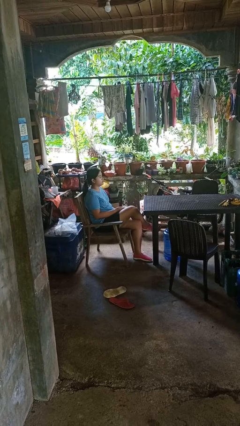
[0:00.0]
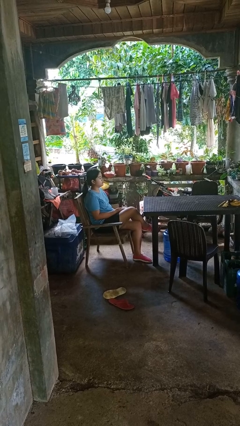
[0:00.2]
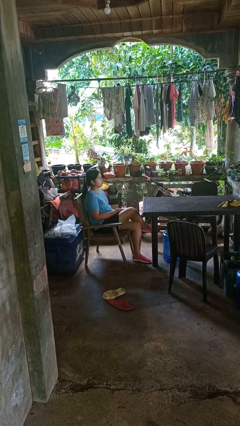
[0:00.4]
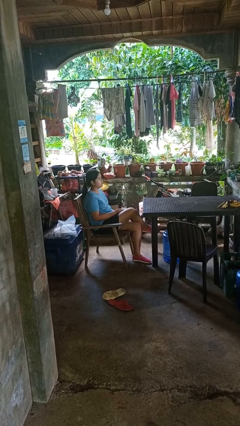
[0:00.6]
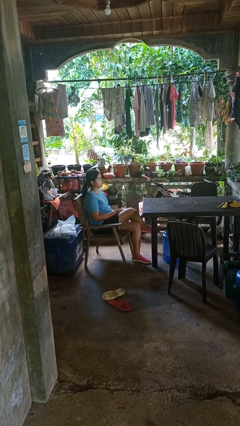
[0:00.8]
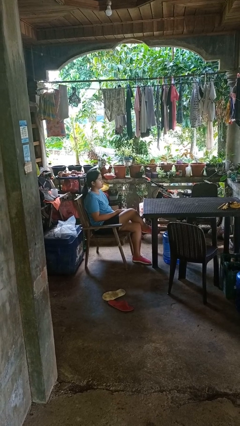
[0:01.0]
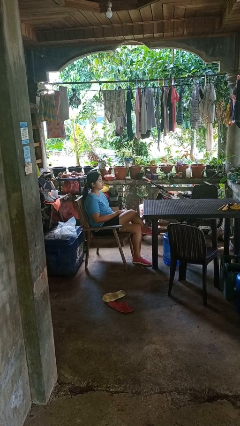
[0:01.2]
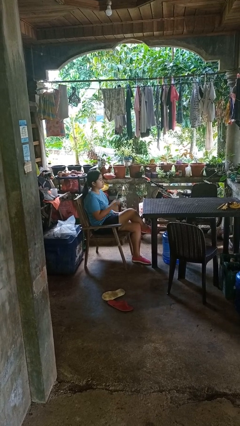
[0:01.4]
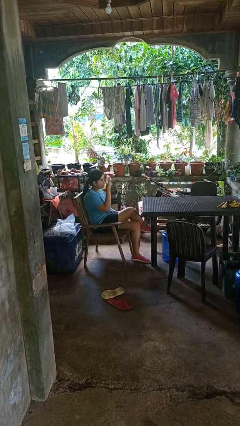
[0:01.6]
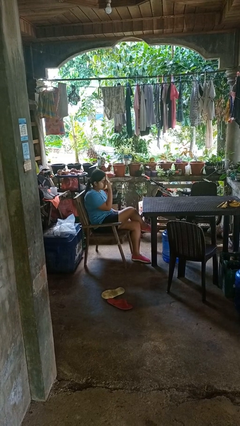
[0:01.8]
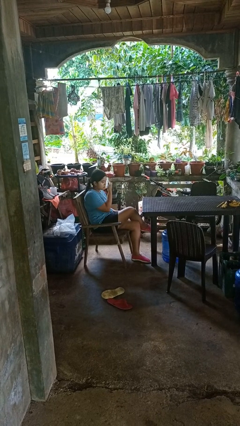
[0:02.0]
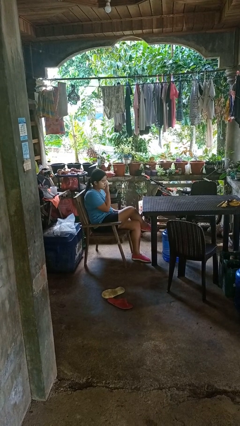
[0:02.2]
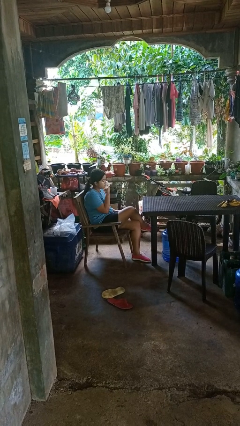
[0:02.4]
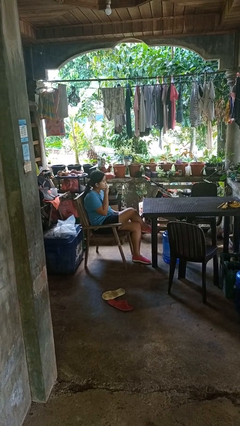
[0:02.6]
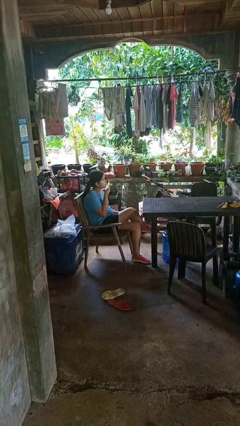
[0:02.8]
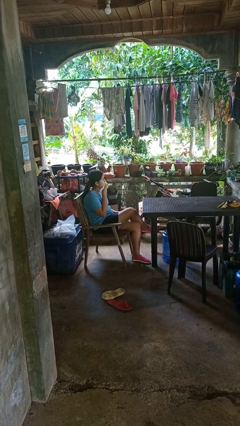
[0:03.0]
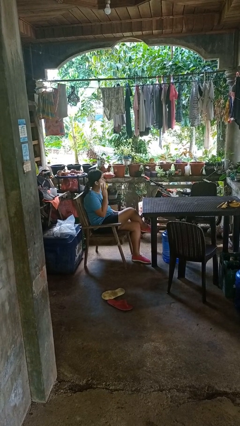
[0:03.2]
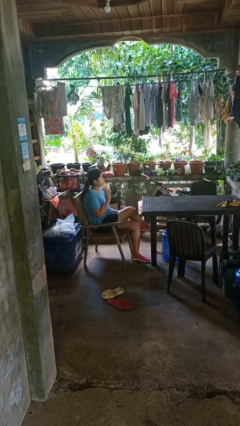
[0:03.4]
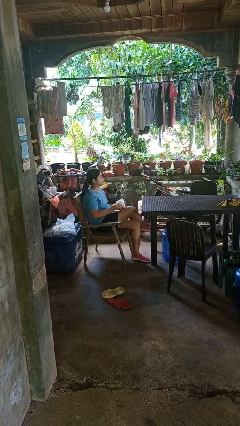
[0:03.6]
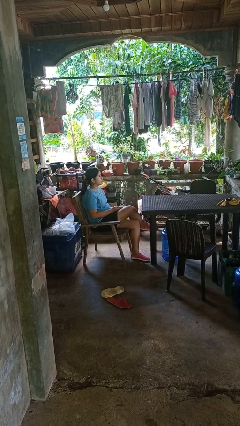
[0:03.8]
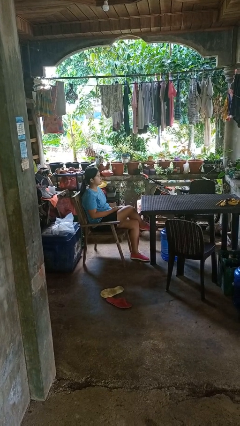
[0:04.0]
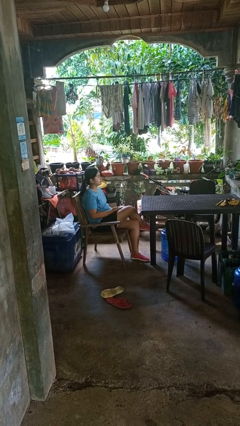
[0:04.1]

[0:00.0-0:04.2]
person wipes mouth with napkin

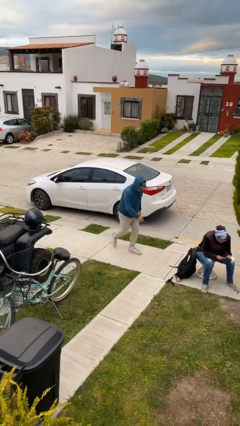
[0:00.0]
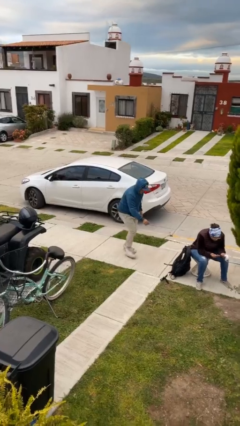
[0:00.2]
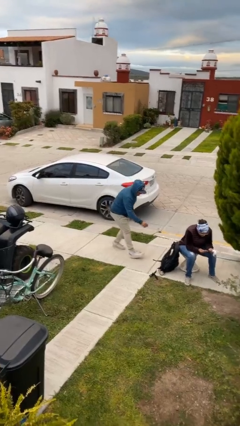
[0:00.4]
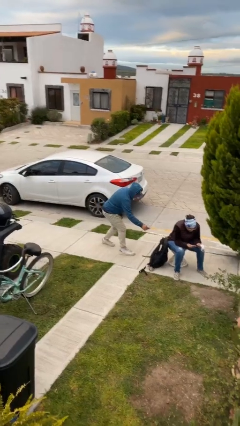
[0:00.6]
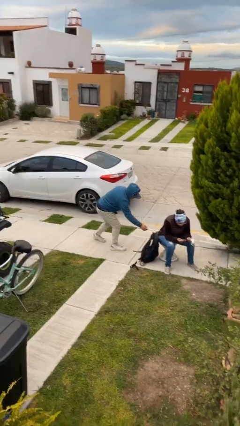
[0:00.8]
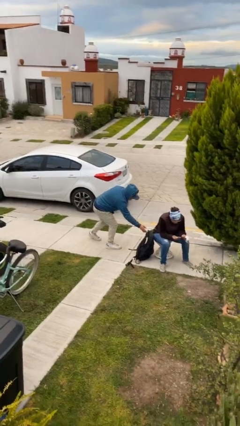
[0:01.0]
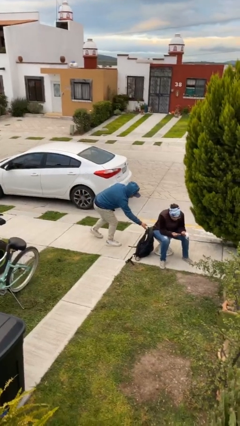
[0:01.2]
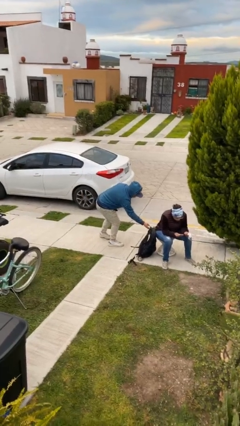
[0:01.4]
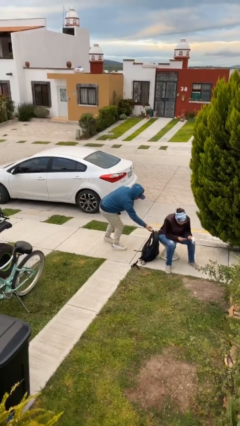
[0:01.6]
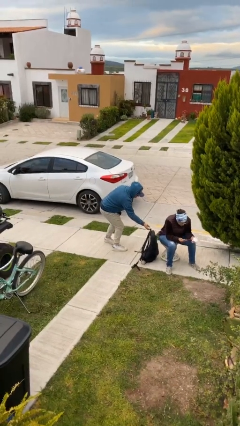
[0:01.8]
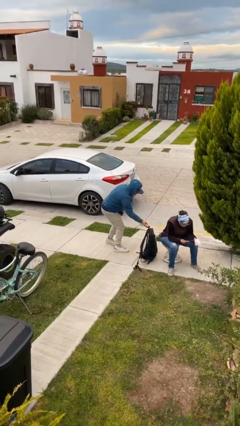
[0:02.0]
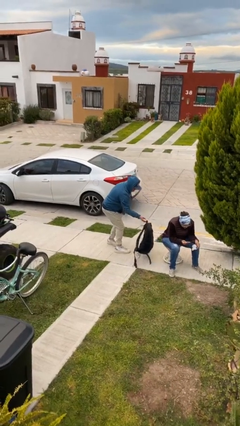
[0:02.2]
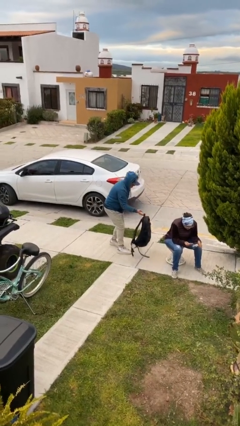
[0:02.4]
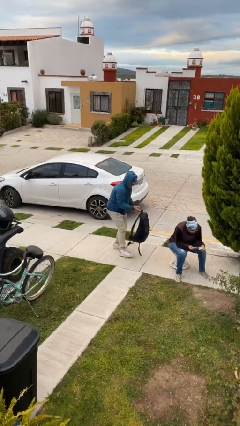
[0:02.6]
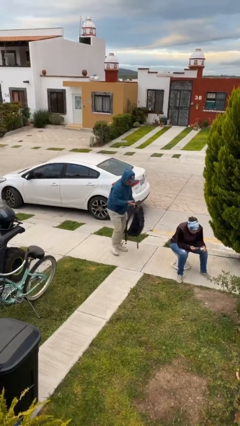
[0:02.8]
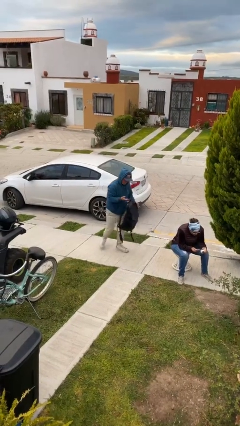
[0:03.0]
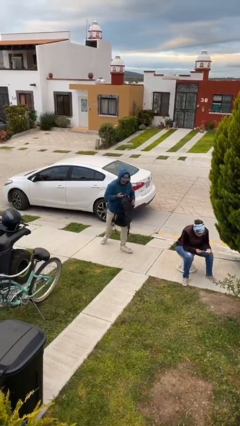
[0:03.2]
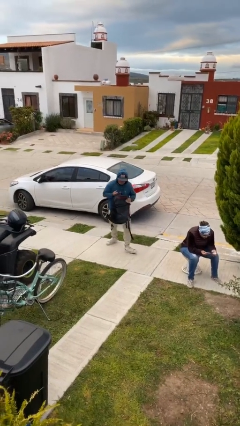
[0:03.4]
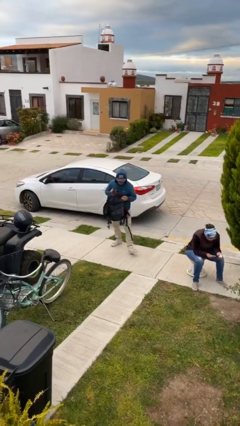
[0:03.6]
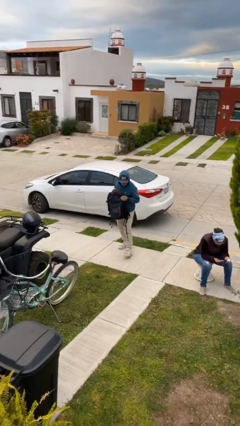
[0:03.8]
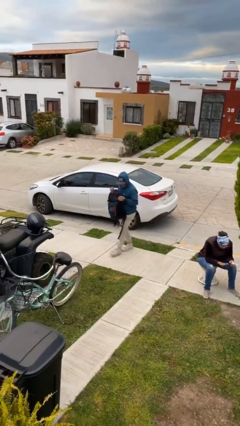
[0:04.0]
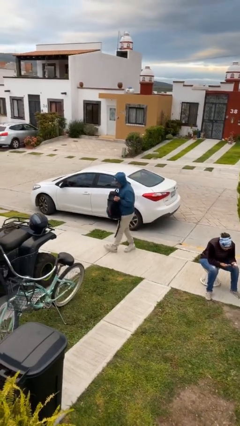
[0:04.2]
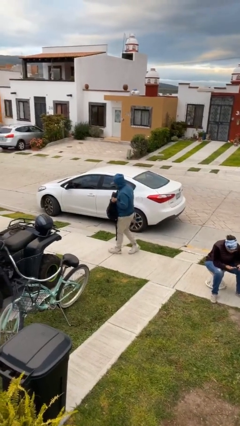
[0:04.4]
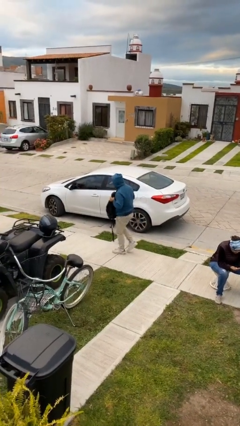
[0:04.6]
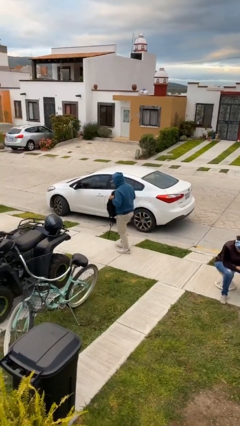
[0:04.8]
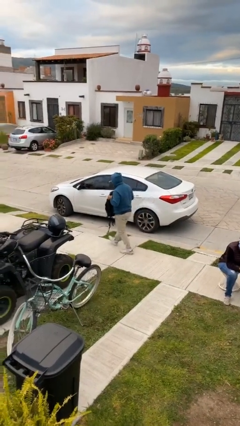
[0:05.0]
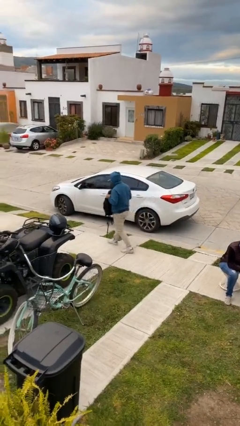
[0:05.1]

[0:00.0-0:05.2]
person steals object from person

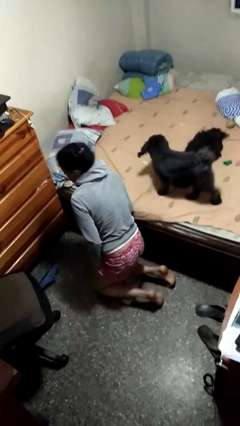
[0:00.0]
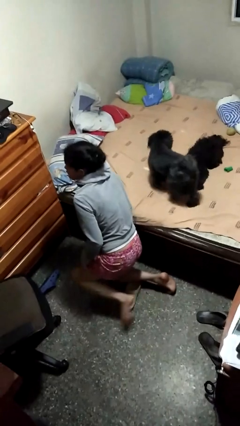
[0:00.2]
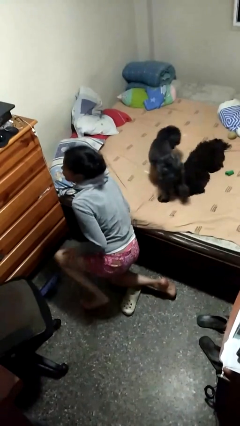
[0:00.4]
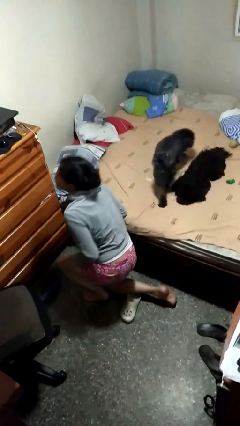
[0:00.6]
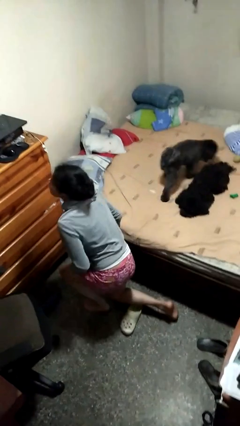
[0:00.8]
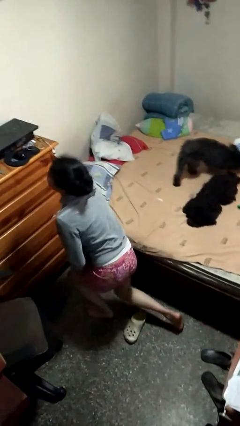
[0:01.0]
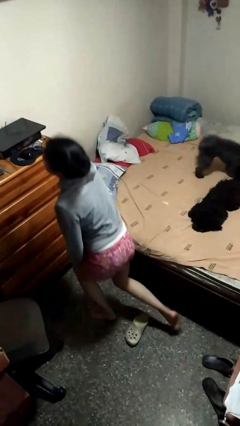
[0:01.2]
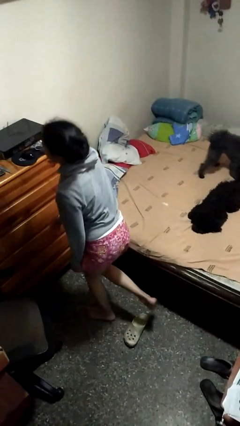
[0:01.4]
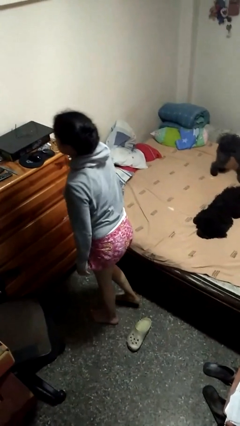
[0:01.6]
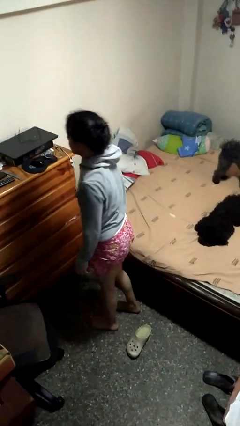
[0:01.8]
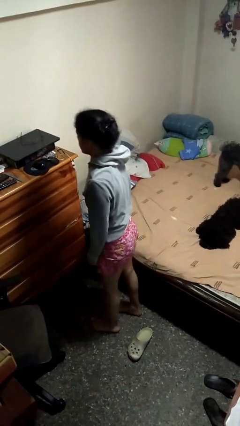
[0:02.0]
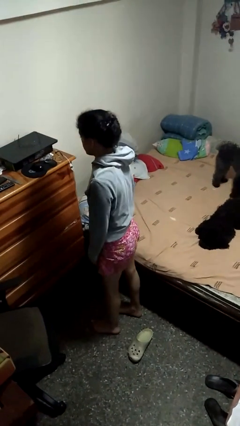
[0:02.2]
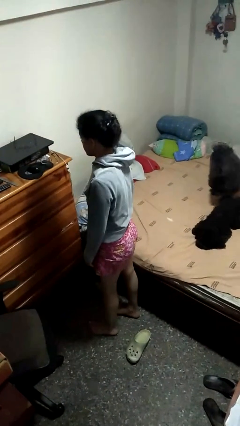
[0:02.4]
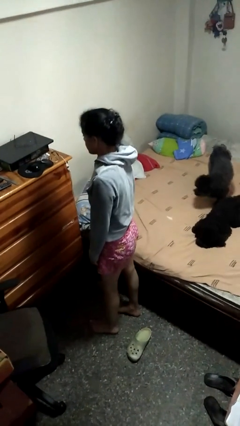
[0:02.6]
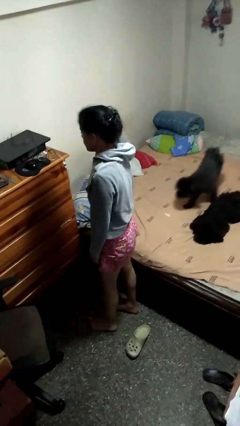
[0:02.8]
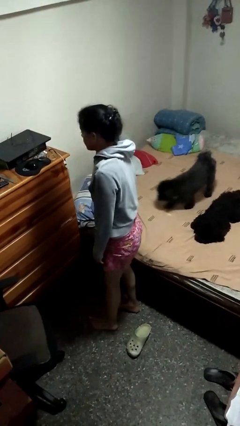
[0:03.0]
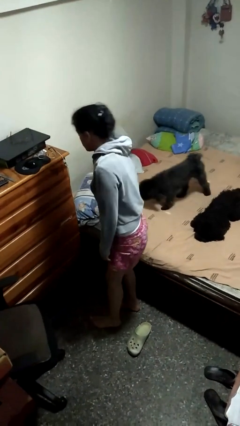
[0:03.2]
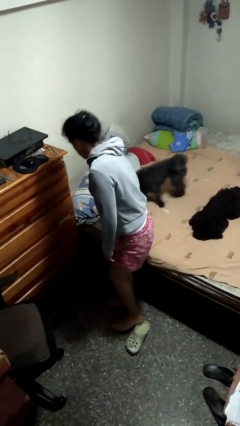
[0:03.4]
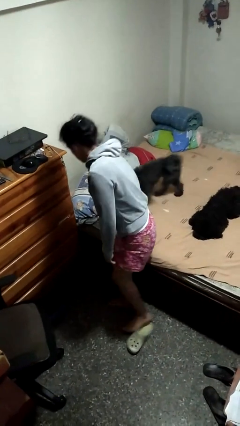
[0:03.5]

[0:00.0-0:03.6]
person stands up from floor

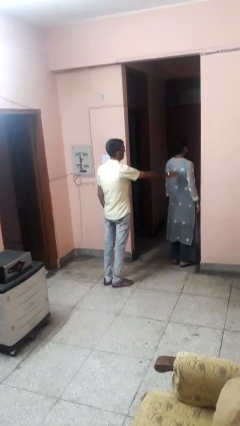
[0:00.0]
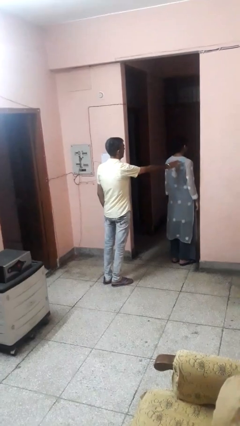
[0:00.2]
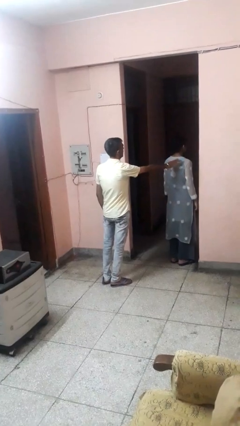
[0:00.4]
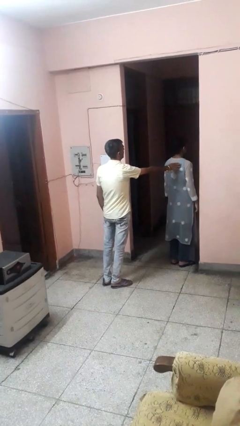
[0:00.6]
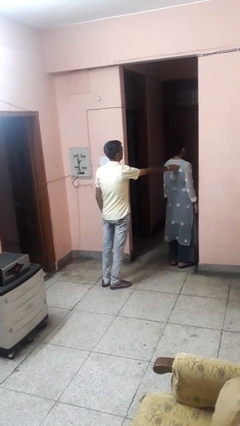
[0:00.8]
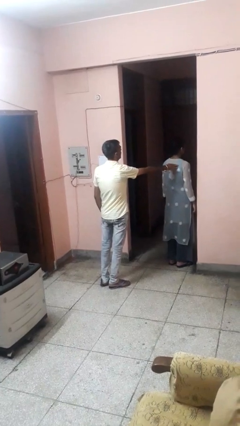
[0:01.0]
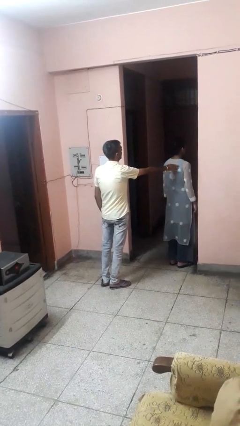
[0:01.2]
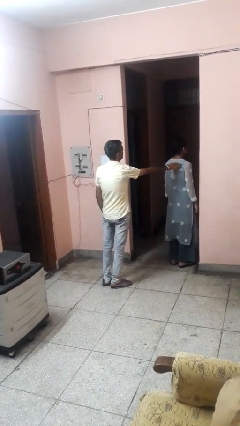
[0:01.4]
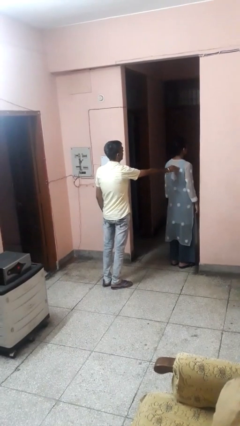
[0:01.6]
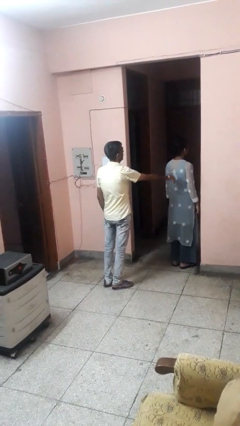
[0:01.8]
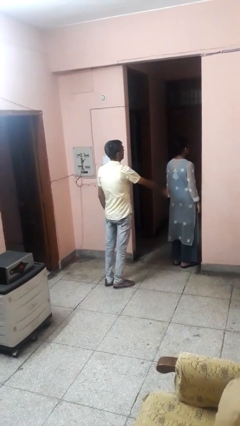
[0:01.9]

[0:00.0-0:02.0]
person touches back of person

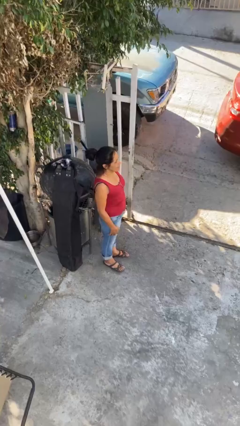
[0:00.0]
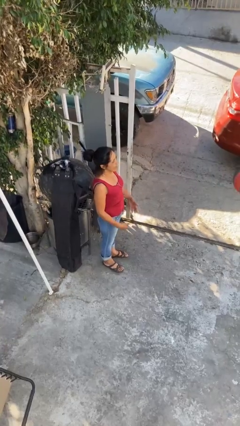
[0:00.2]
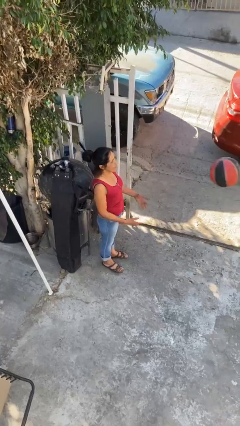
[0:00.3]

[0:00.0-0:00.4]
person catches object from person

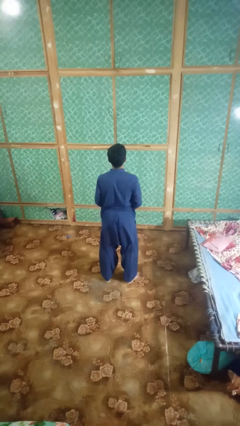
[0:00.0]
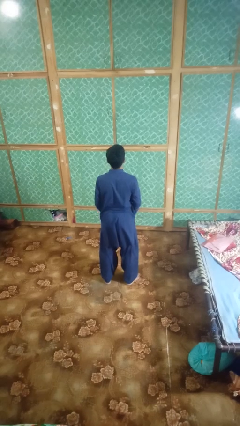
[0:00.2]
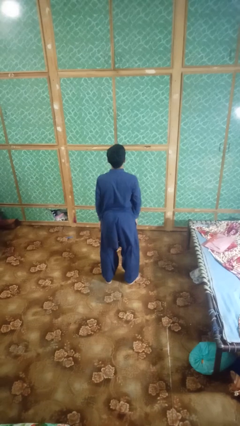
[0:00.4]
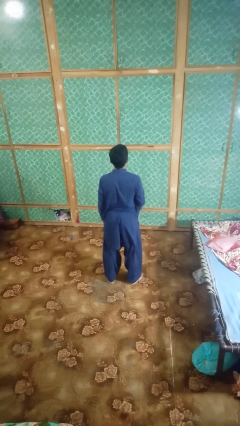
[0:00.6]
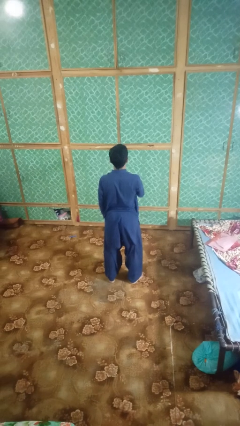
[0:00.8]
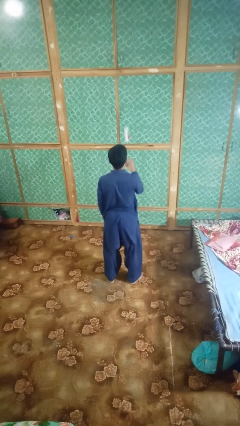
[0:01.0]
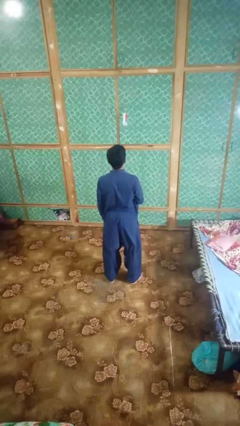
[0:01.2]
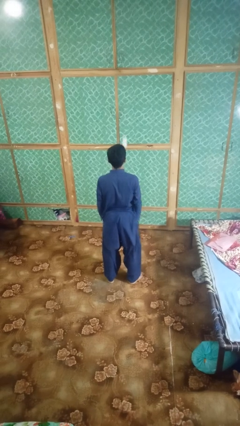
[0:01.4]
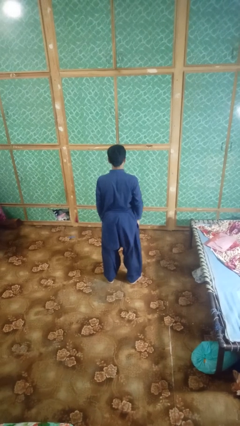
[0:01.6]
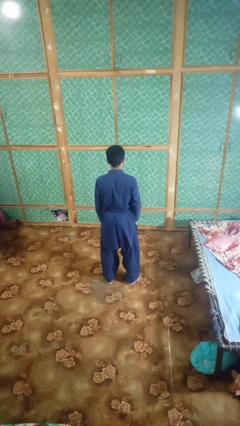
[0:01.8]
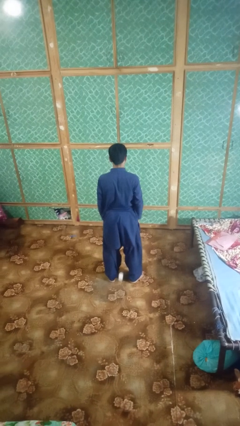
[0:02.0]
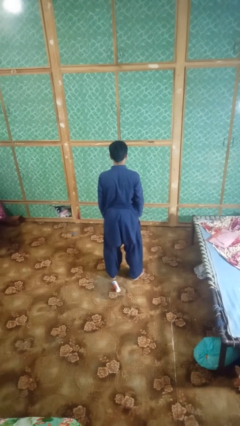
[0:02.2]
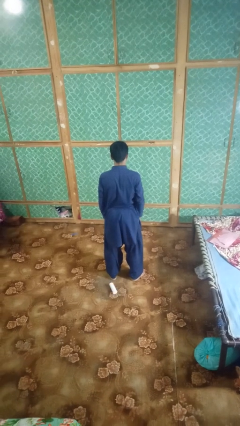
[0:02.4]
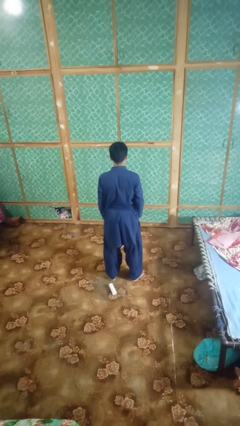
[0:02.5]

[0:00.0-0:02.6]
person throws object into air
